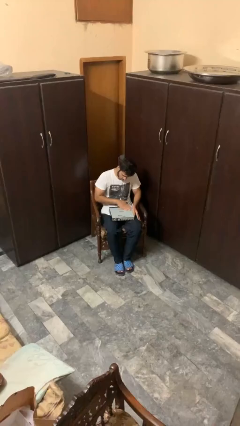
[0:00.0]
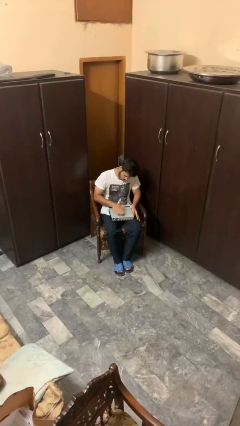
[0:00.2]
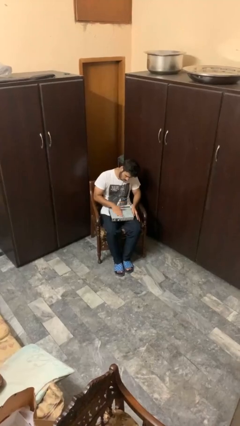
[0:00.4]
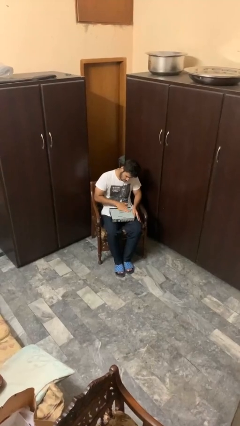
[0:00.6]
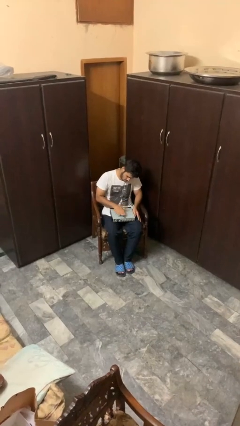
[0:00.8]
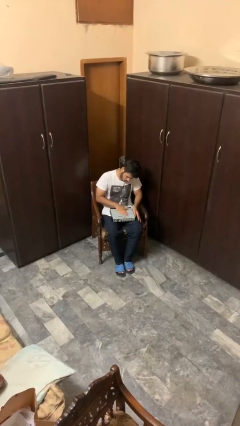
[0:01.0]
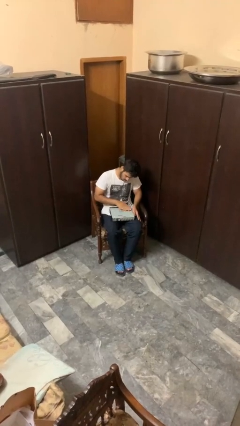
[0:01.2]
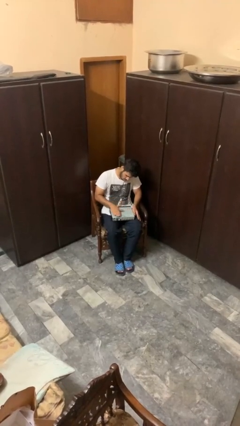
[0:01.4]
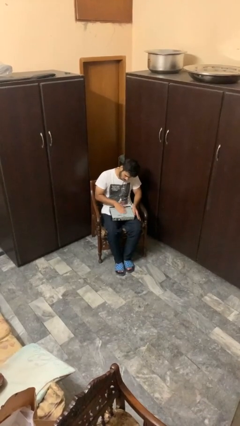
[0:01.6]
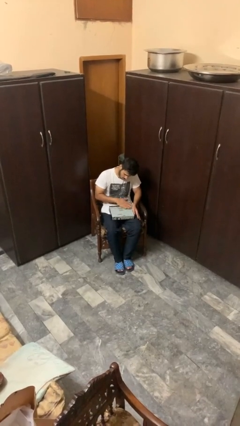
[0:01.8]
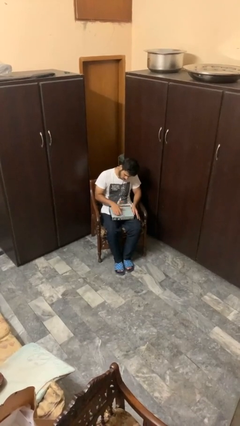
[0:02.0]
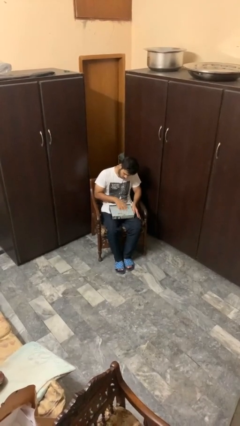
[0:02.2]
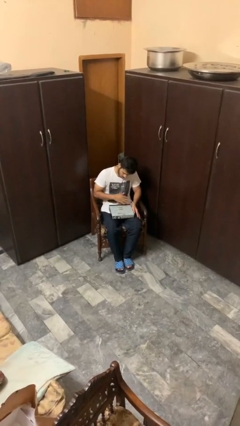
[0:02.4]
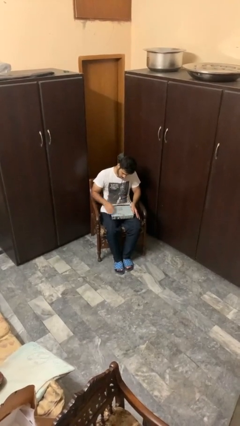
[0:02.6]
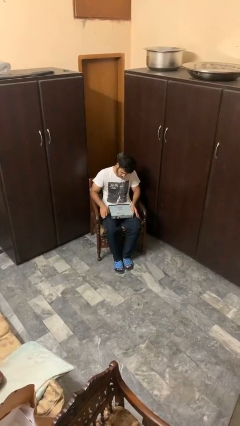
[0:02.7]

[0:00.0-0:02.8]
person waves hand over object

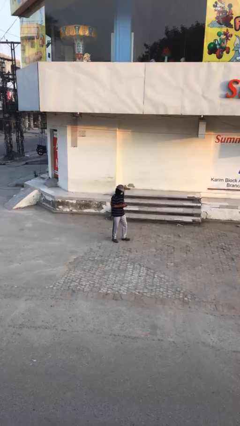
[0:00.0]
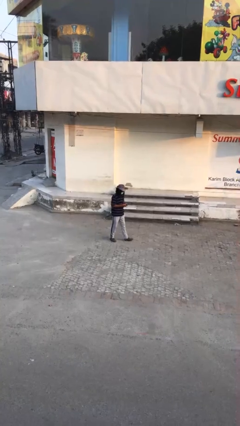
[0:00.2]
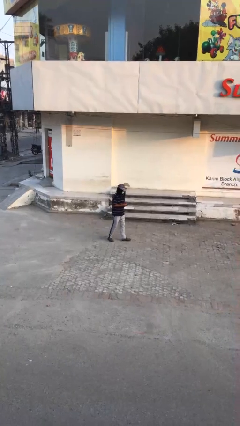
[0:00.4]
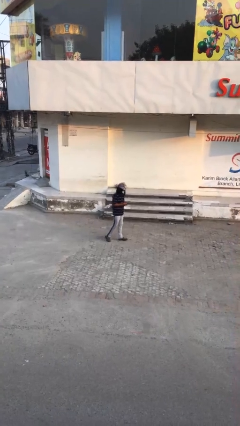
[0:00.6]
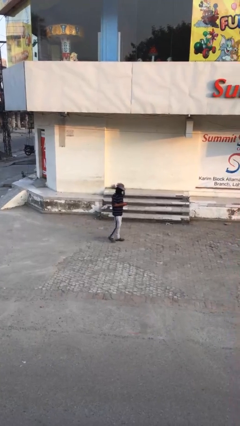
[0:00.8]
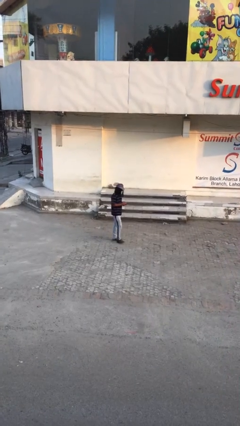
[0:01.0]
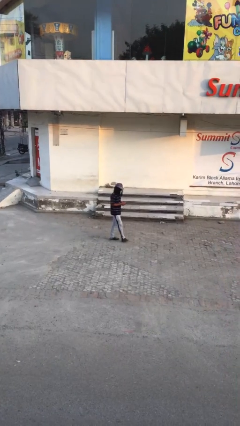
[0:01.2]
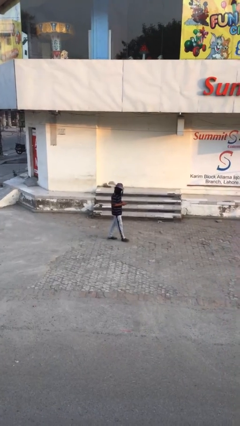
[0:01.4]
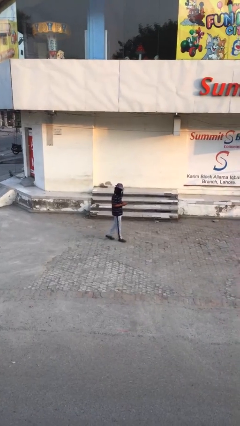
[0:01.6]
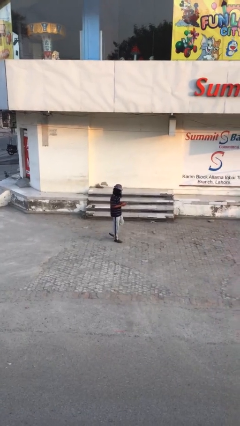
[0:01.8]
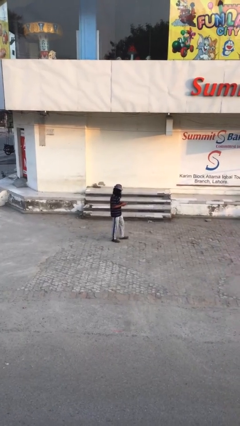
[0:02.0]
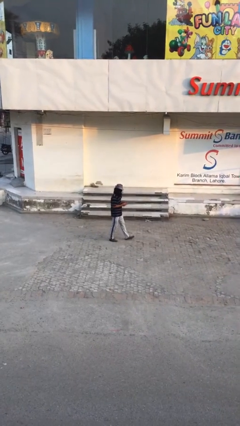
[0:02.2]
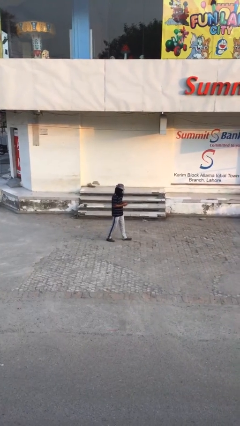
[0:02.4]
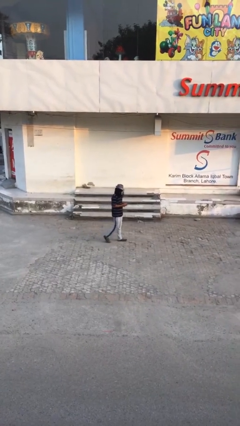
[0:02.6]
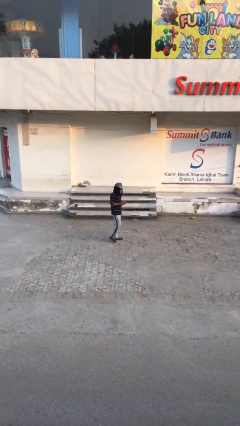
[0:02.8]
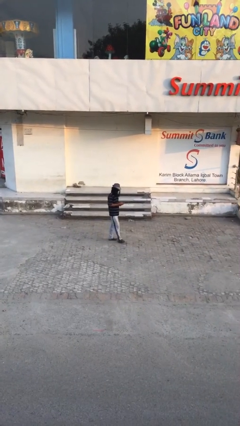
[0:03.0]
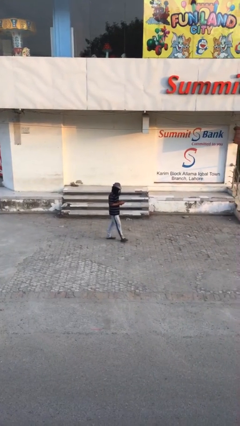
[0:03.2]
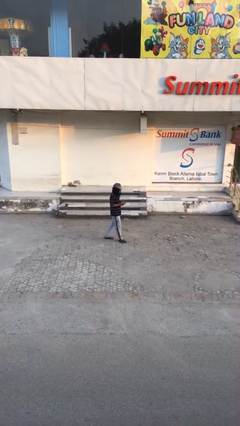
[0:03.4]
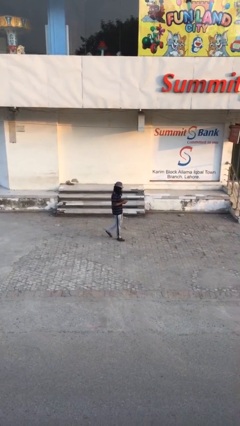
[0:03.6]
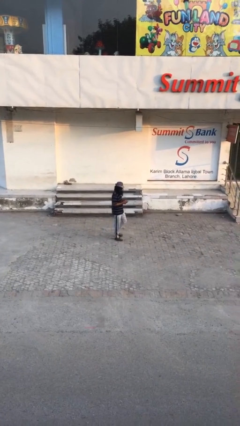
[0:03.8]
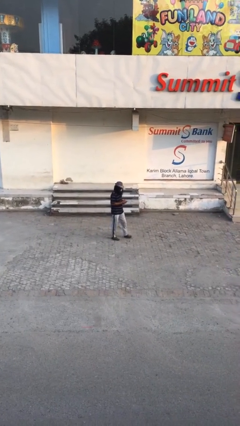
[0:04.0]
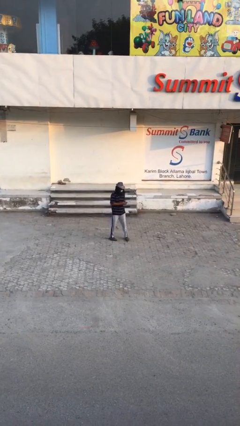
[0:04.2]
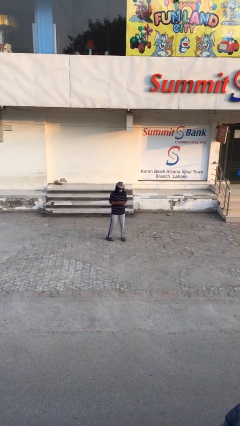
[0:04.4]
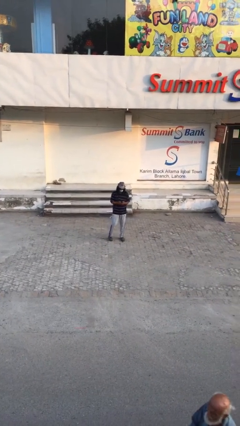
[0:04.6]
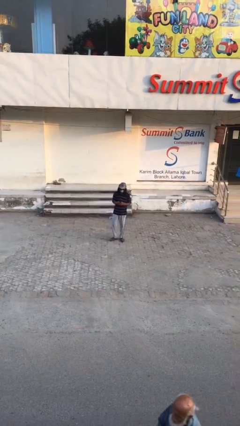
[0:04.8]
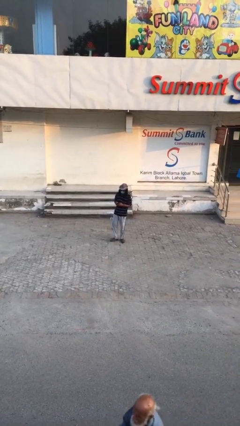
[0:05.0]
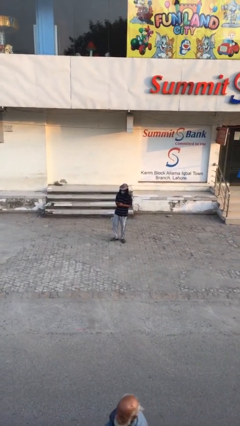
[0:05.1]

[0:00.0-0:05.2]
person texts on phone

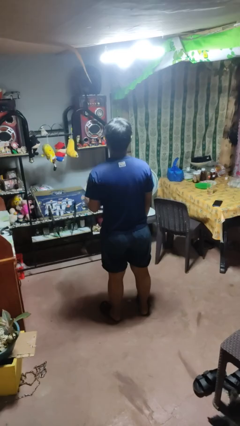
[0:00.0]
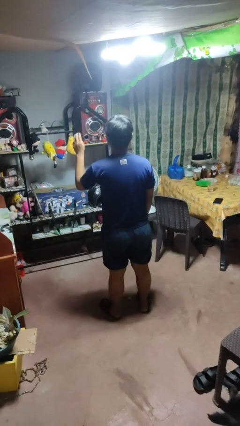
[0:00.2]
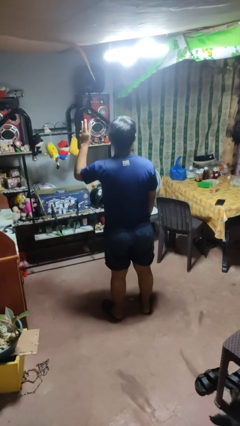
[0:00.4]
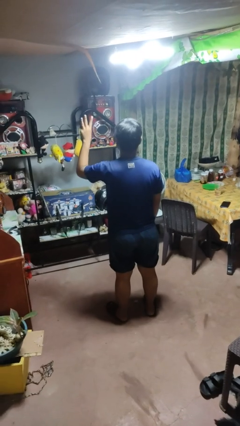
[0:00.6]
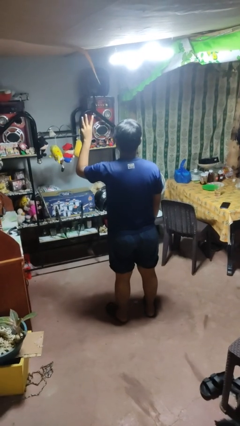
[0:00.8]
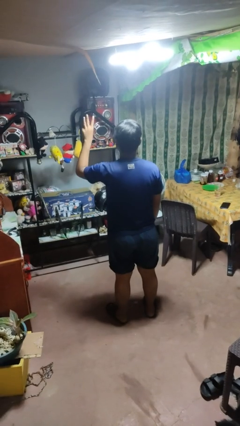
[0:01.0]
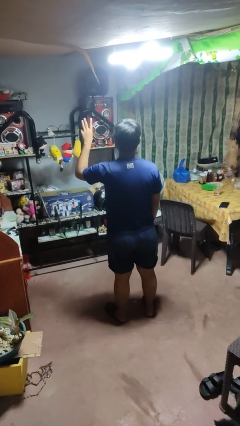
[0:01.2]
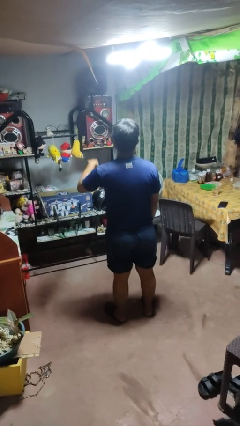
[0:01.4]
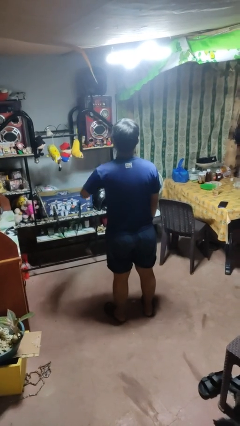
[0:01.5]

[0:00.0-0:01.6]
person gestures number three

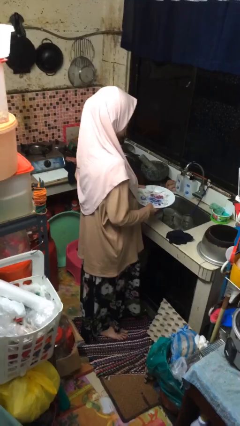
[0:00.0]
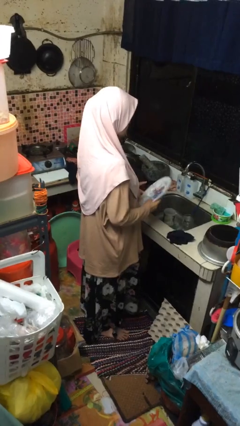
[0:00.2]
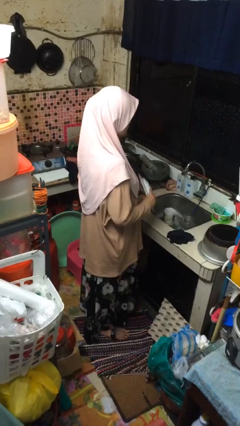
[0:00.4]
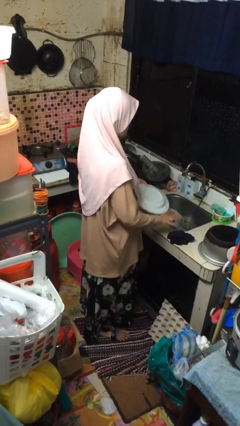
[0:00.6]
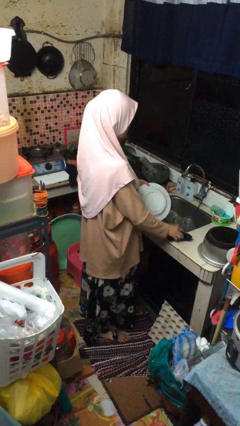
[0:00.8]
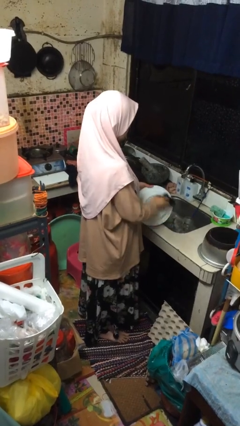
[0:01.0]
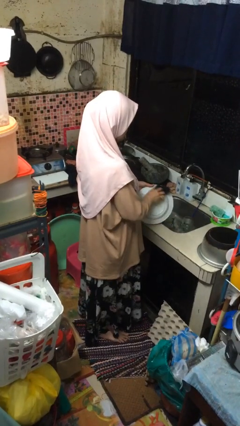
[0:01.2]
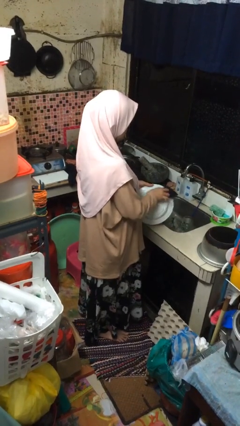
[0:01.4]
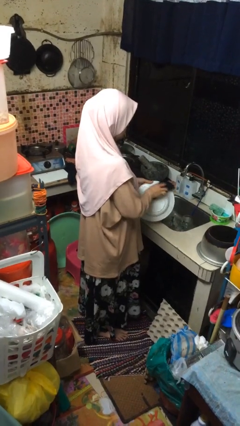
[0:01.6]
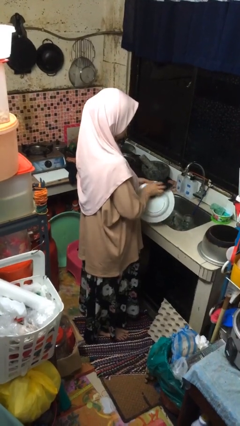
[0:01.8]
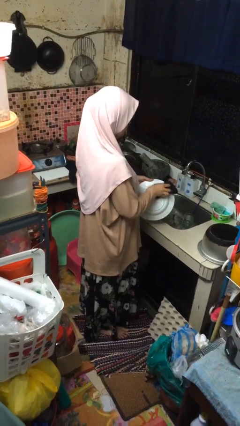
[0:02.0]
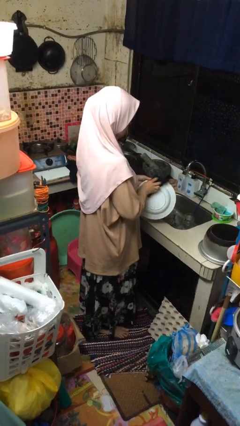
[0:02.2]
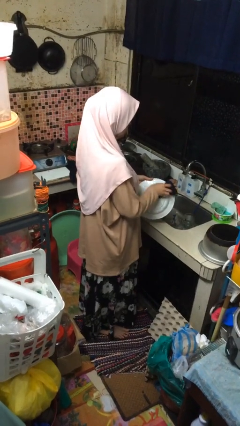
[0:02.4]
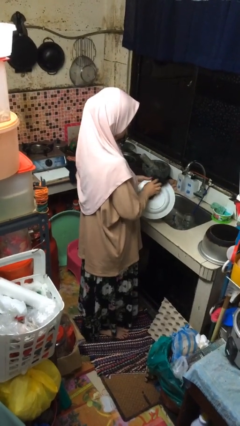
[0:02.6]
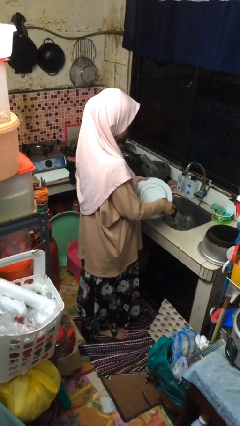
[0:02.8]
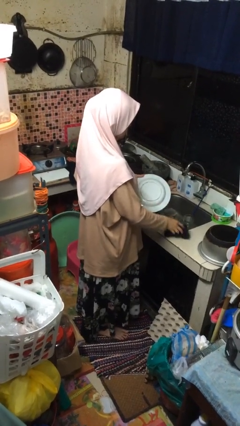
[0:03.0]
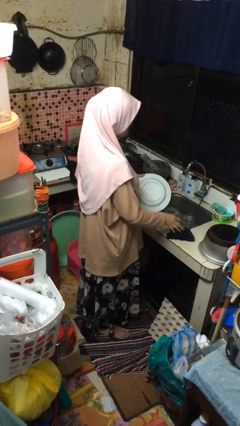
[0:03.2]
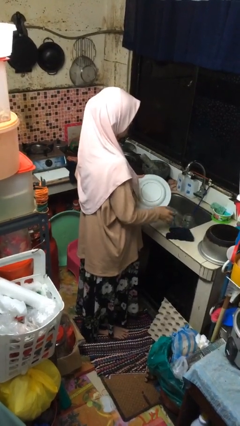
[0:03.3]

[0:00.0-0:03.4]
person dries dish

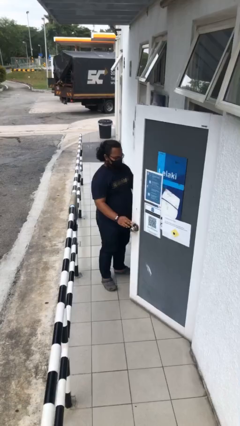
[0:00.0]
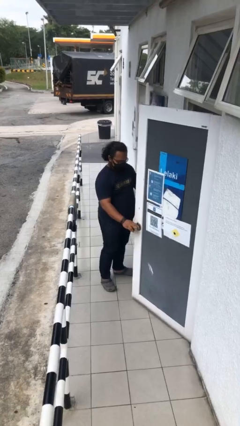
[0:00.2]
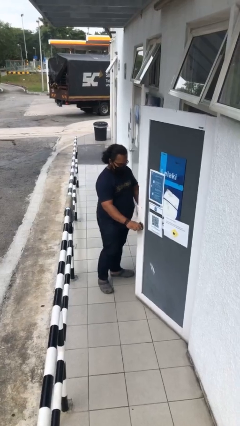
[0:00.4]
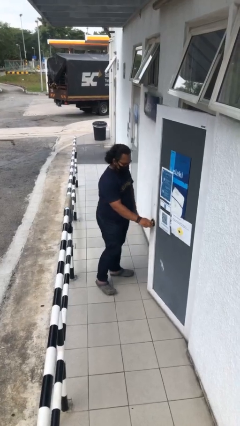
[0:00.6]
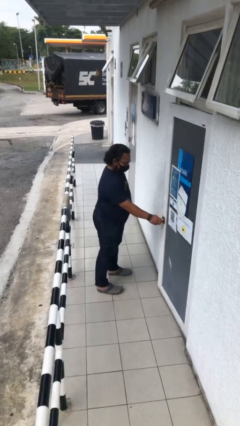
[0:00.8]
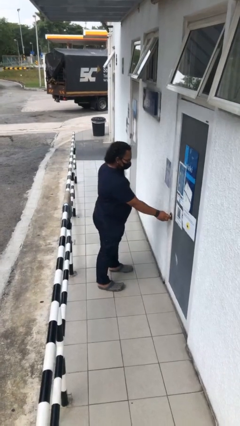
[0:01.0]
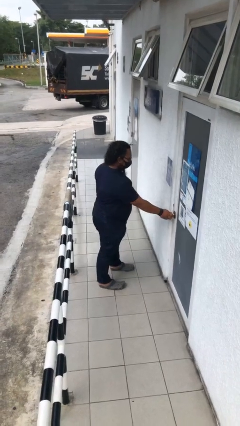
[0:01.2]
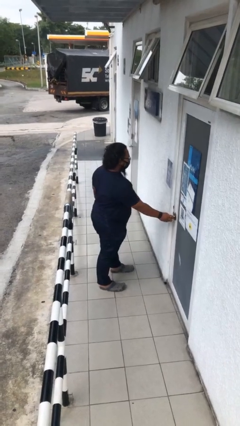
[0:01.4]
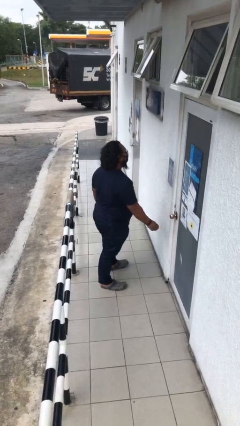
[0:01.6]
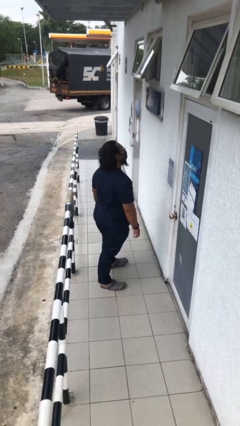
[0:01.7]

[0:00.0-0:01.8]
person closes facility door

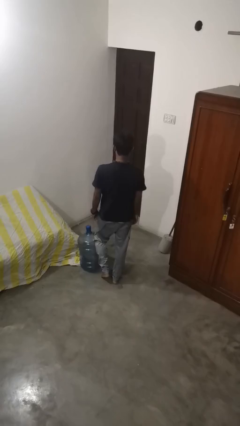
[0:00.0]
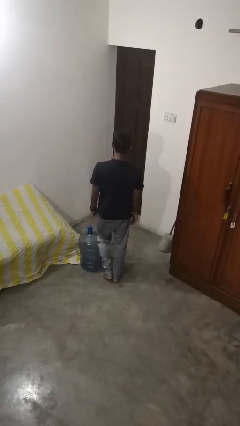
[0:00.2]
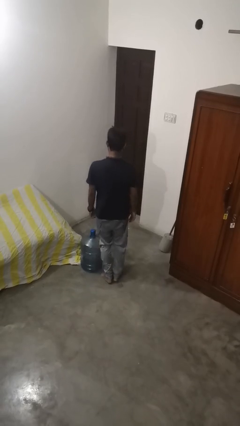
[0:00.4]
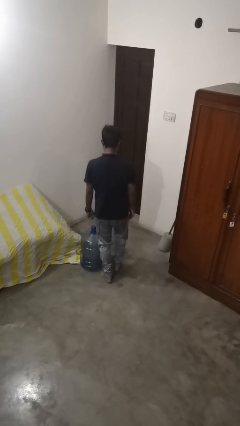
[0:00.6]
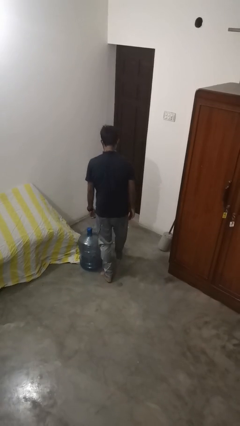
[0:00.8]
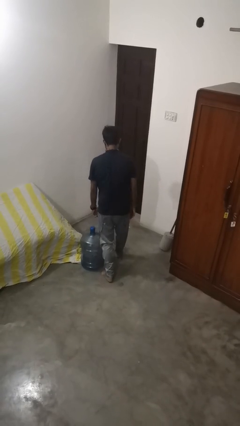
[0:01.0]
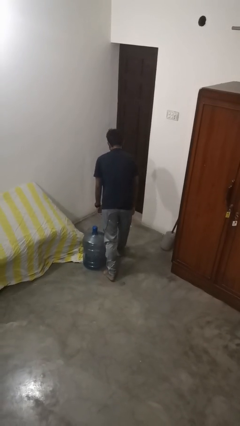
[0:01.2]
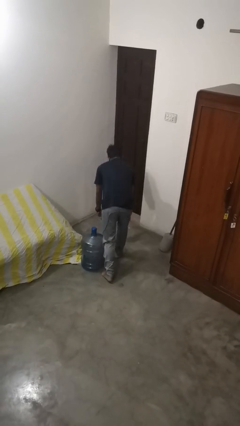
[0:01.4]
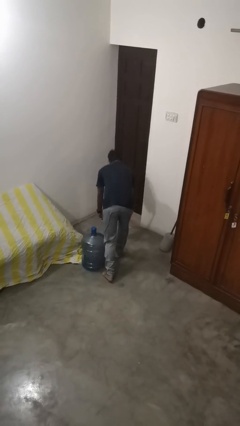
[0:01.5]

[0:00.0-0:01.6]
person trips on object on floor

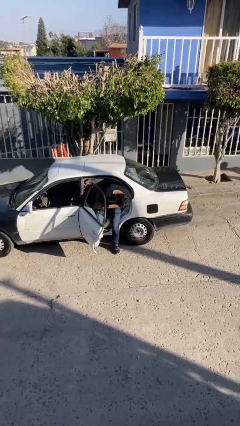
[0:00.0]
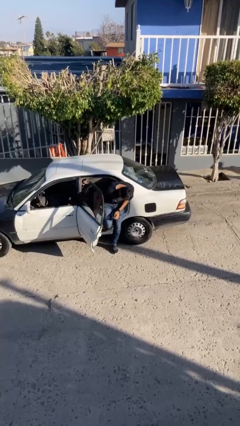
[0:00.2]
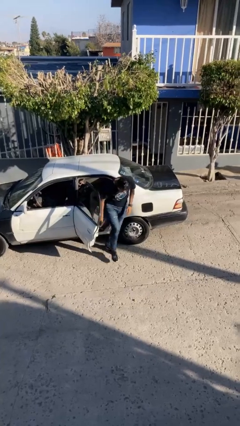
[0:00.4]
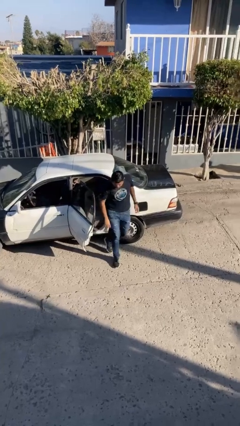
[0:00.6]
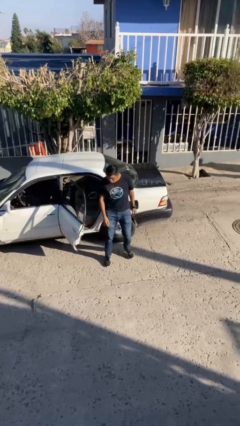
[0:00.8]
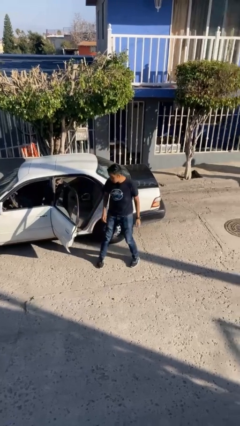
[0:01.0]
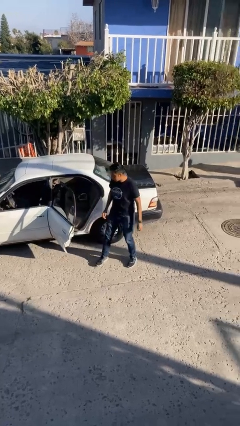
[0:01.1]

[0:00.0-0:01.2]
person exits car
